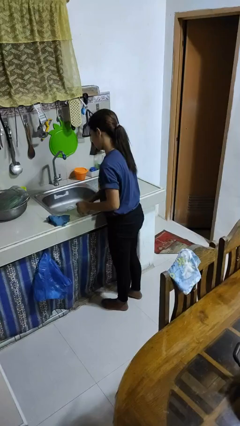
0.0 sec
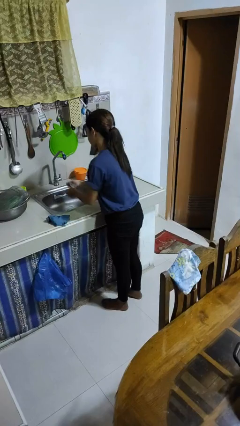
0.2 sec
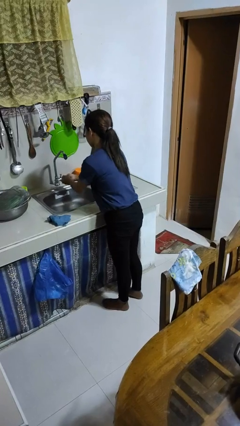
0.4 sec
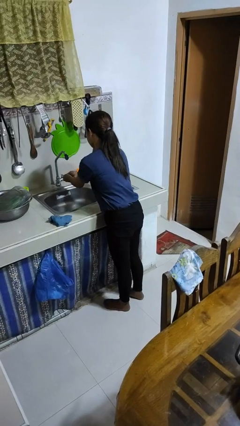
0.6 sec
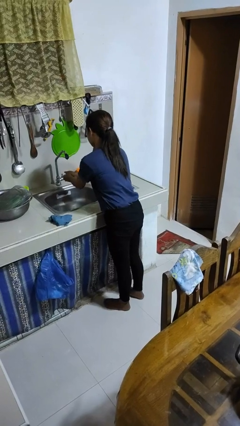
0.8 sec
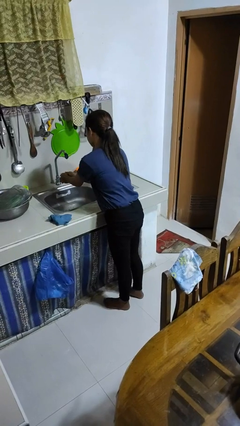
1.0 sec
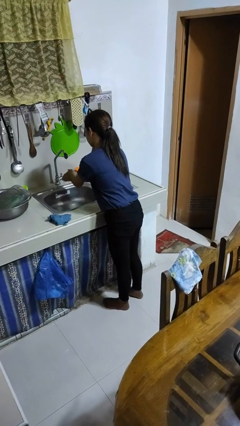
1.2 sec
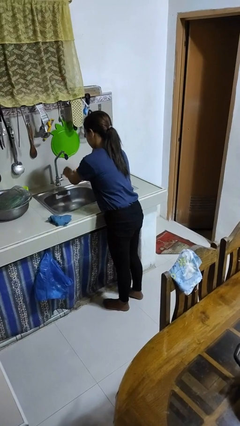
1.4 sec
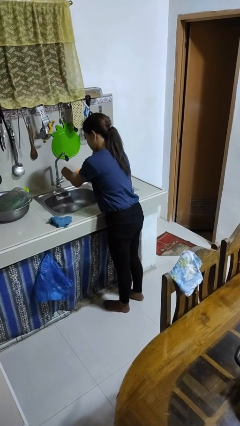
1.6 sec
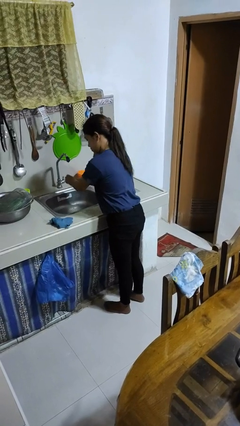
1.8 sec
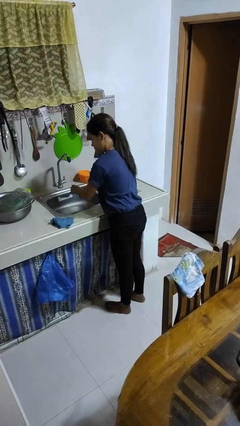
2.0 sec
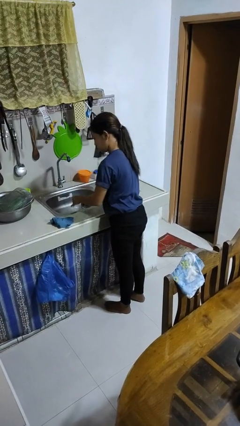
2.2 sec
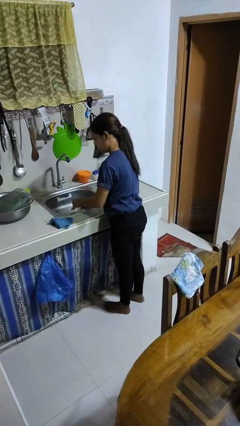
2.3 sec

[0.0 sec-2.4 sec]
person washes hands

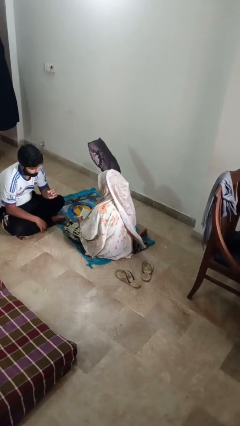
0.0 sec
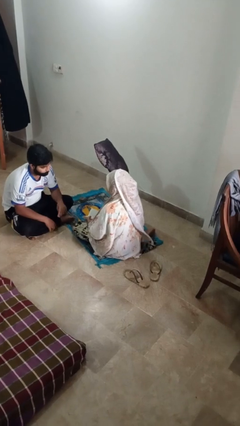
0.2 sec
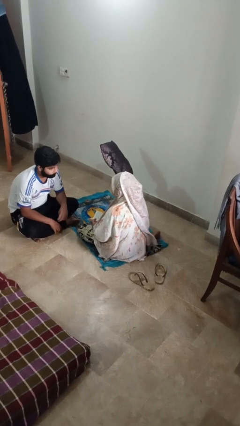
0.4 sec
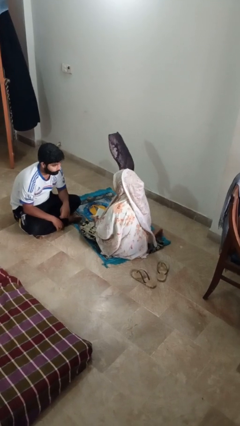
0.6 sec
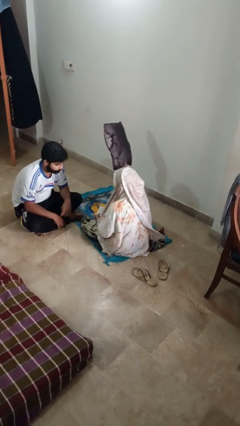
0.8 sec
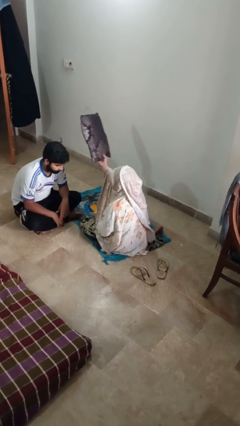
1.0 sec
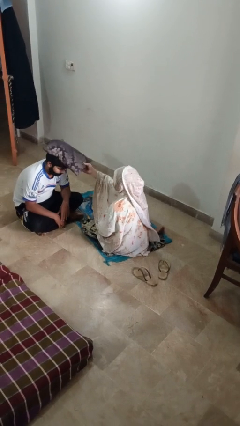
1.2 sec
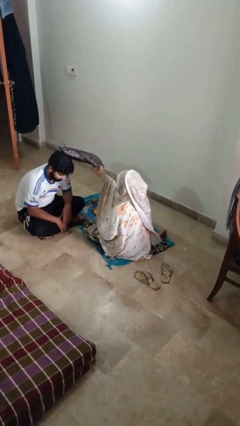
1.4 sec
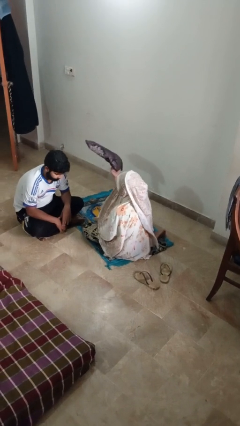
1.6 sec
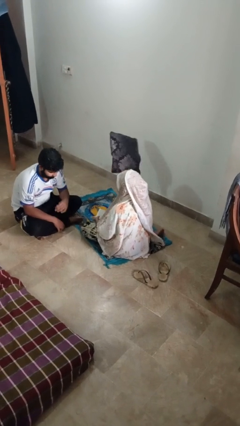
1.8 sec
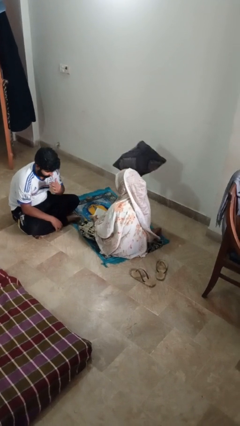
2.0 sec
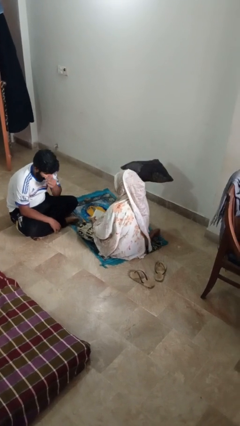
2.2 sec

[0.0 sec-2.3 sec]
person hits person with pillow

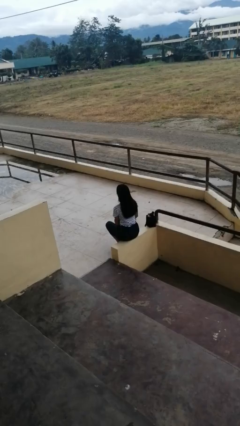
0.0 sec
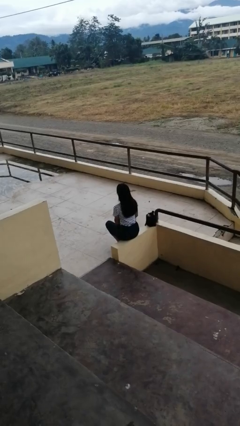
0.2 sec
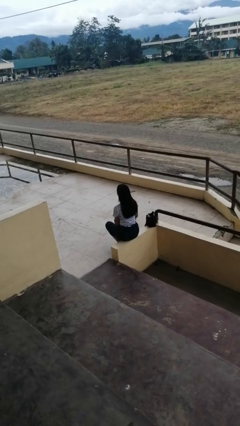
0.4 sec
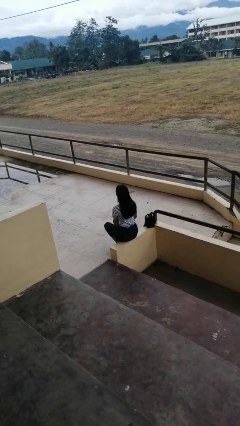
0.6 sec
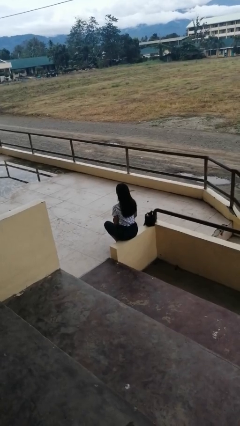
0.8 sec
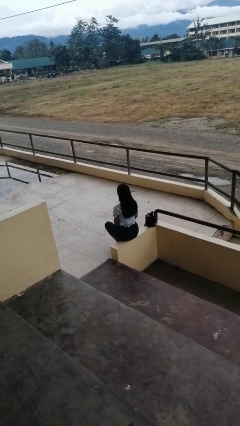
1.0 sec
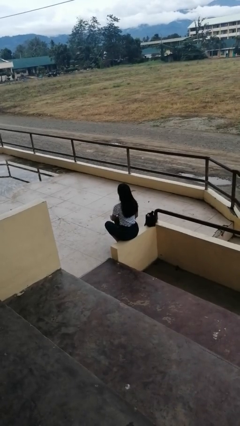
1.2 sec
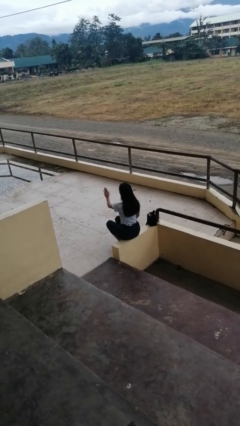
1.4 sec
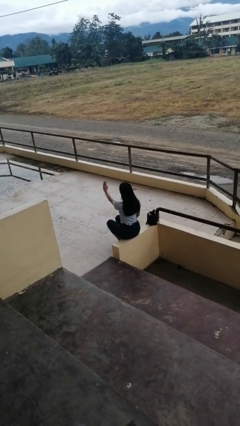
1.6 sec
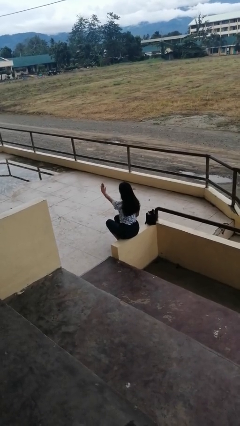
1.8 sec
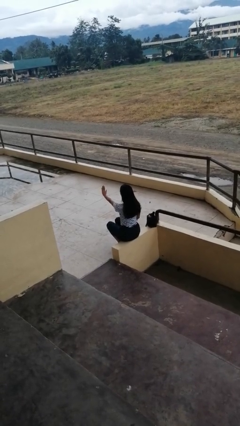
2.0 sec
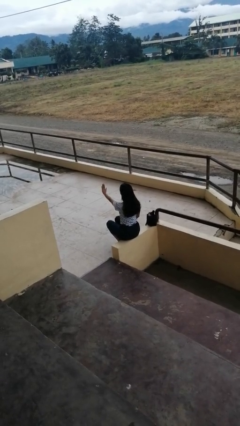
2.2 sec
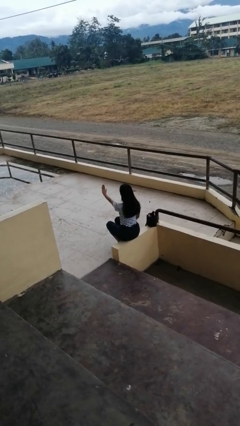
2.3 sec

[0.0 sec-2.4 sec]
person gestures stop

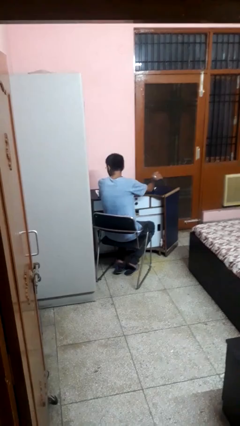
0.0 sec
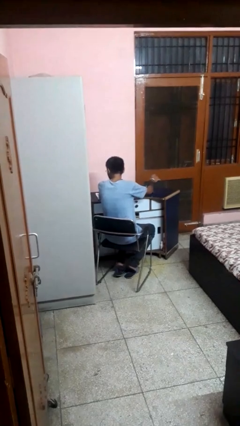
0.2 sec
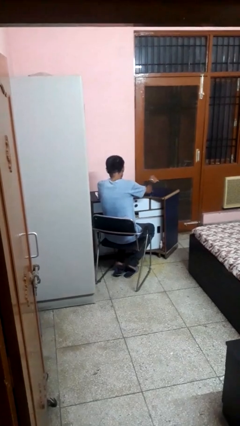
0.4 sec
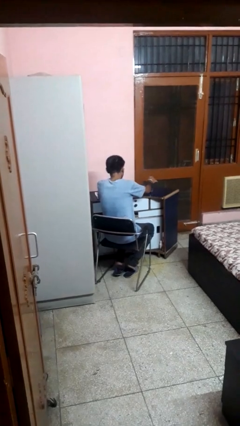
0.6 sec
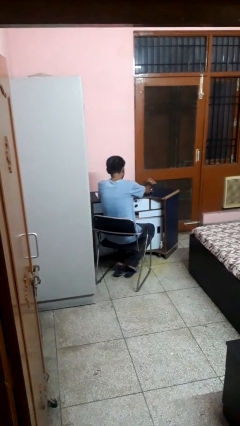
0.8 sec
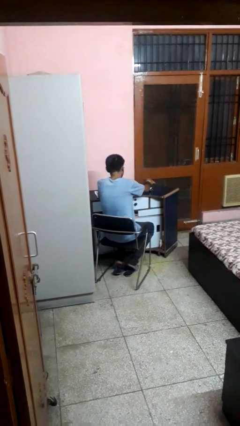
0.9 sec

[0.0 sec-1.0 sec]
person knocks over glass

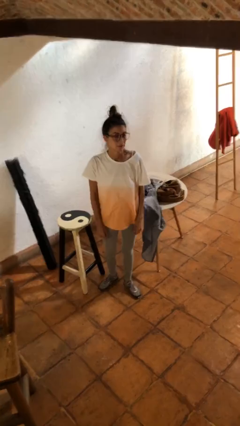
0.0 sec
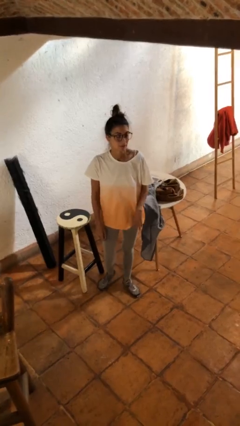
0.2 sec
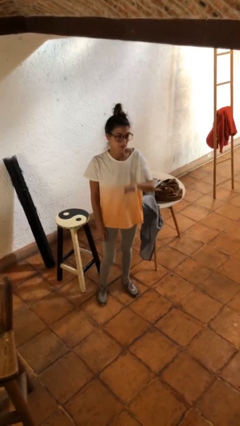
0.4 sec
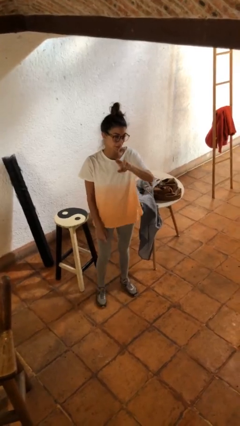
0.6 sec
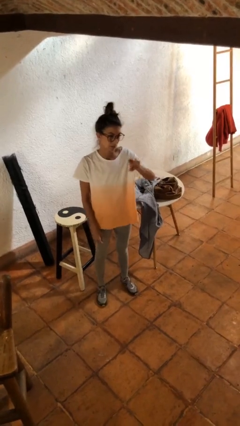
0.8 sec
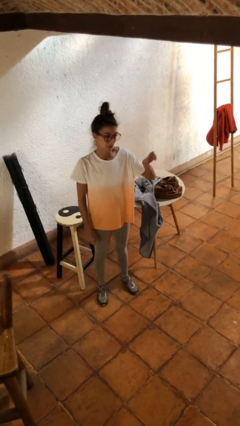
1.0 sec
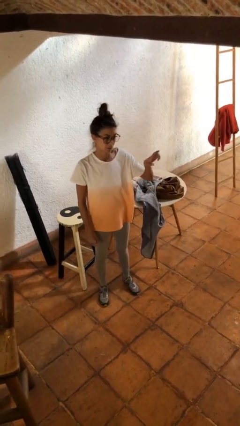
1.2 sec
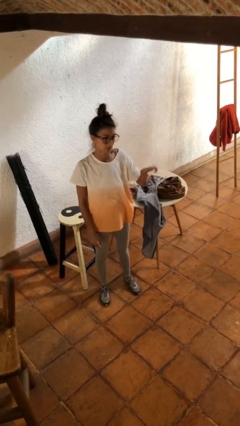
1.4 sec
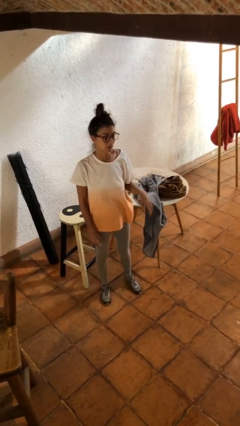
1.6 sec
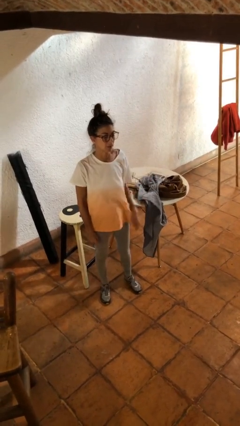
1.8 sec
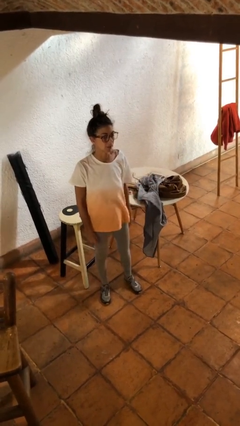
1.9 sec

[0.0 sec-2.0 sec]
person gestures swipe left

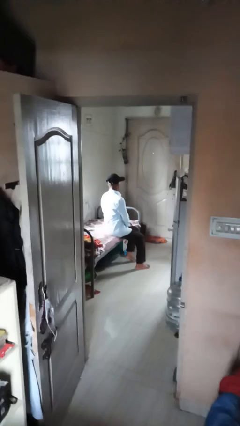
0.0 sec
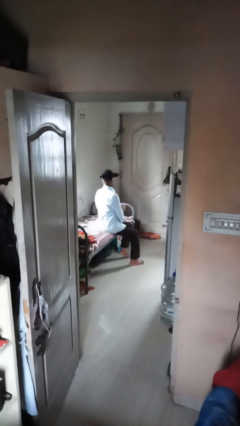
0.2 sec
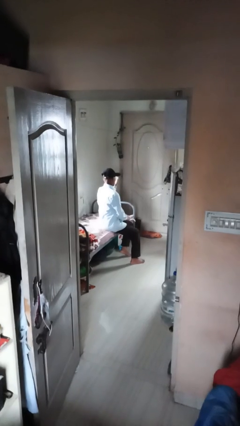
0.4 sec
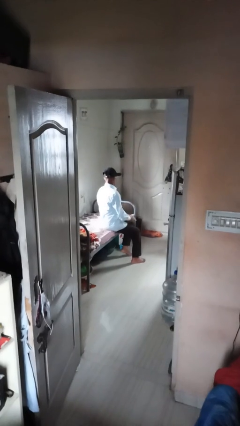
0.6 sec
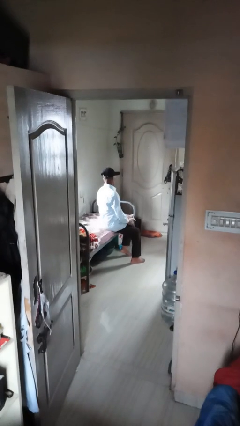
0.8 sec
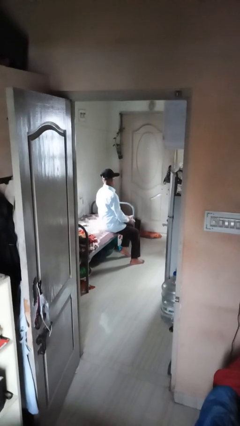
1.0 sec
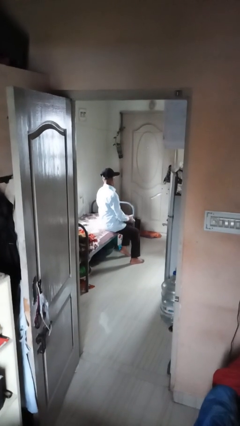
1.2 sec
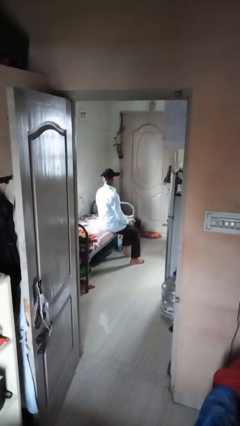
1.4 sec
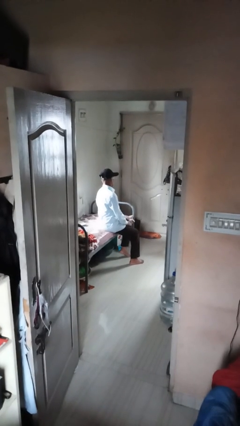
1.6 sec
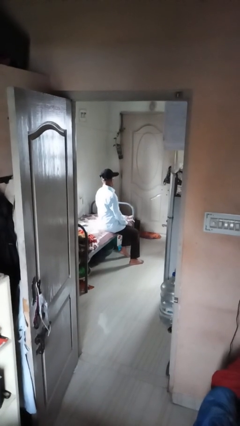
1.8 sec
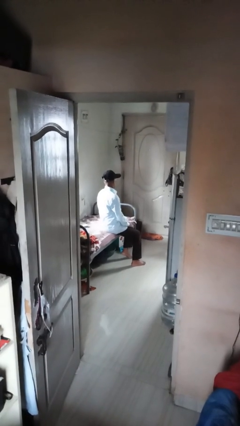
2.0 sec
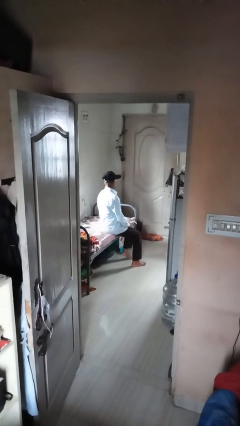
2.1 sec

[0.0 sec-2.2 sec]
person swats bug

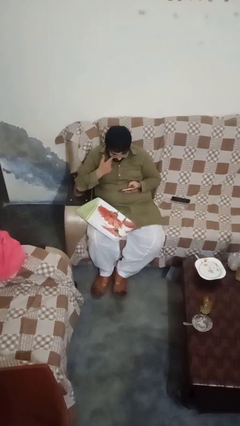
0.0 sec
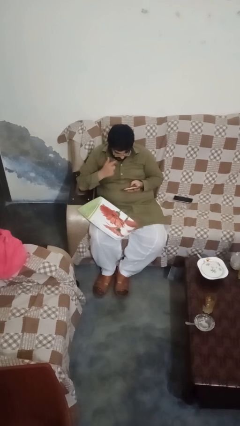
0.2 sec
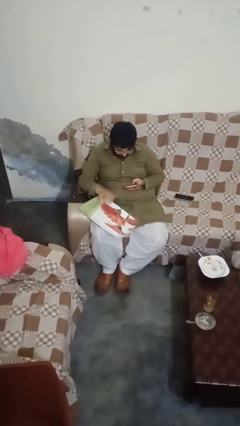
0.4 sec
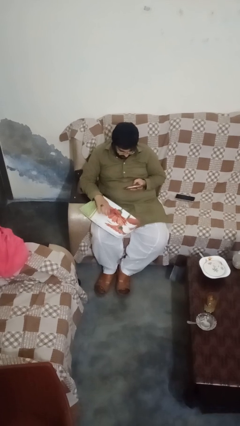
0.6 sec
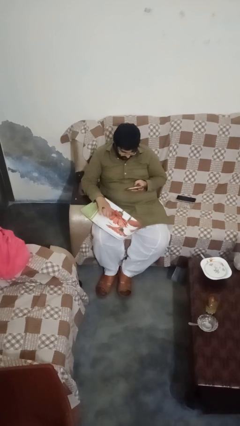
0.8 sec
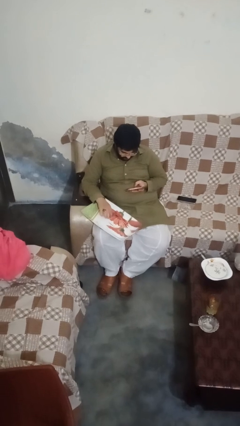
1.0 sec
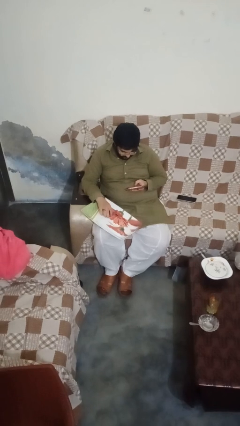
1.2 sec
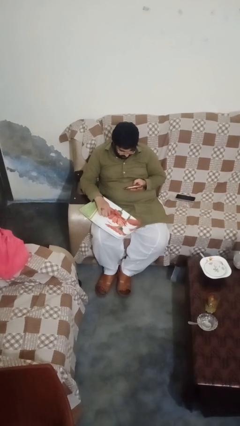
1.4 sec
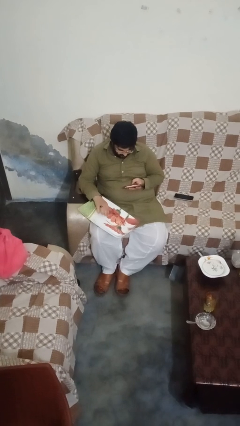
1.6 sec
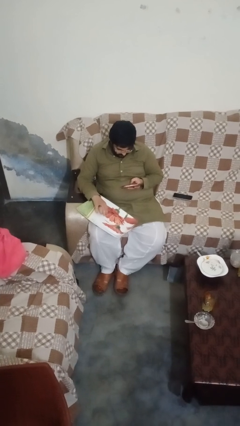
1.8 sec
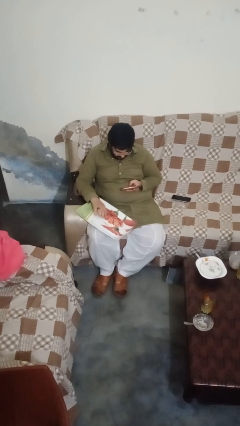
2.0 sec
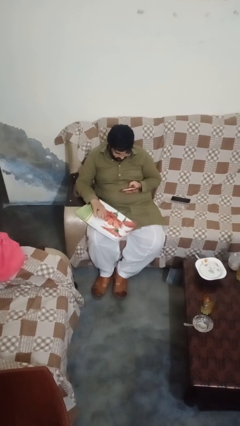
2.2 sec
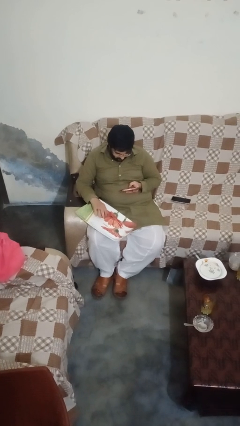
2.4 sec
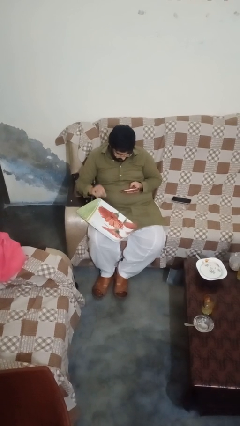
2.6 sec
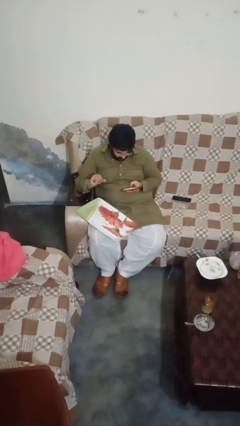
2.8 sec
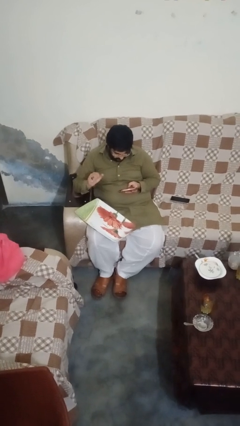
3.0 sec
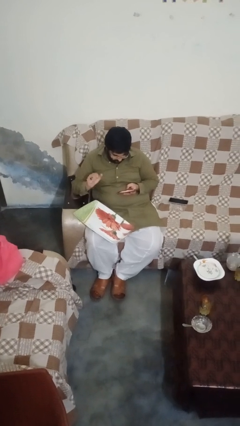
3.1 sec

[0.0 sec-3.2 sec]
person taps object with finger

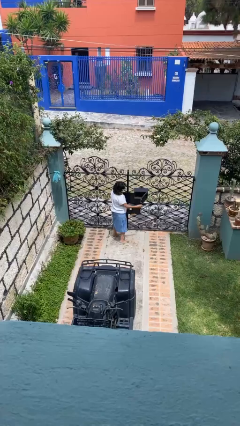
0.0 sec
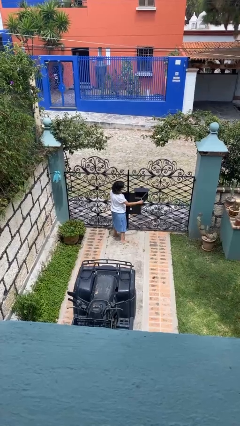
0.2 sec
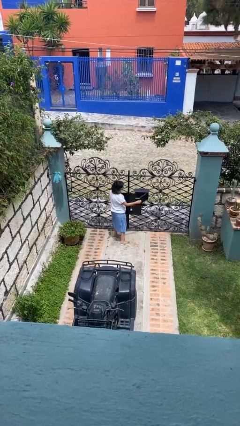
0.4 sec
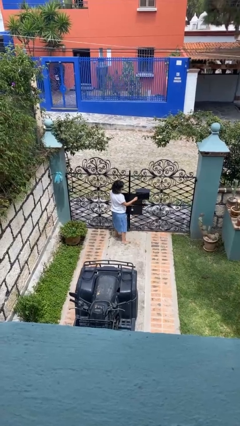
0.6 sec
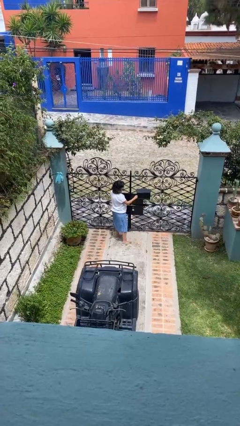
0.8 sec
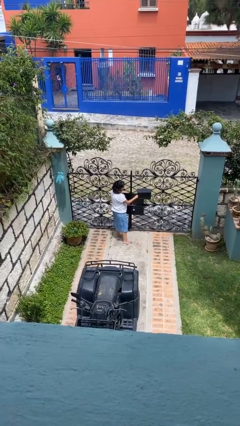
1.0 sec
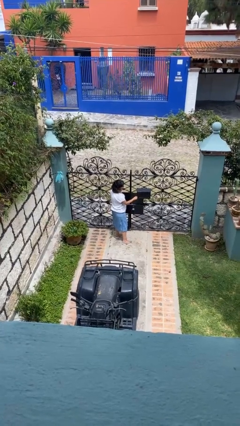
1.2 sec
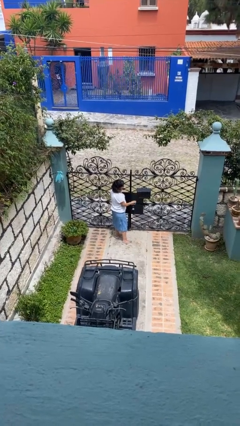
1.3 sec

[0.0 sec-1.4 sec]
person closes mailbox

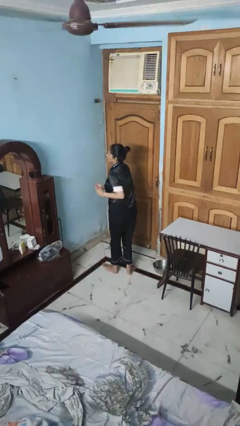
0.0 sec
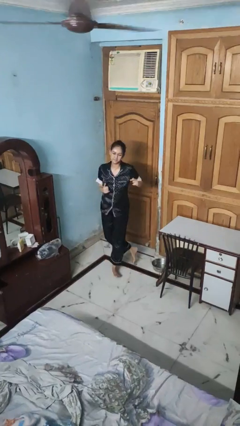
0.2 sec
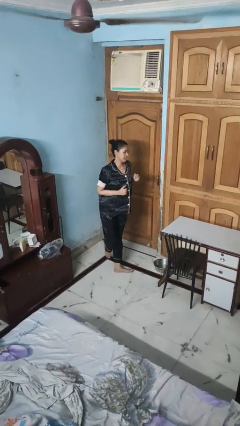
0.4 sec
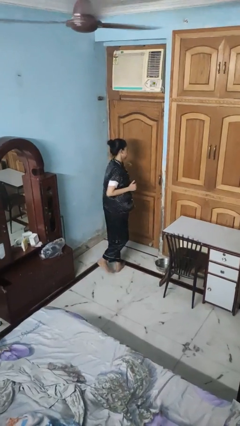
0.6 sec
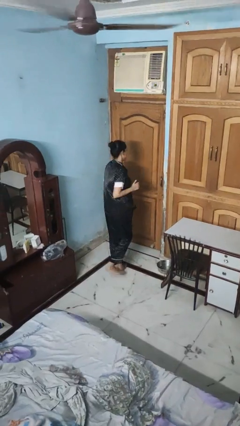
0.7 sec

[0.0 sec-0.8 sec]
person twirls
